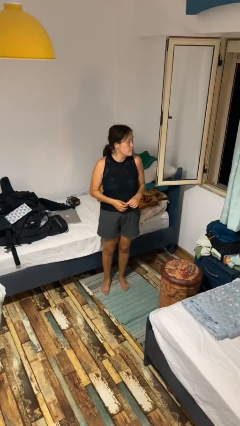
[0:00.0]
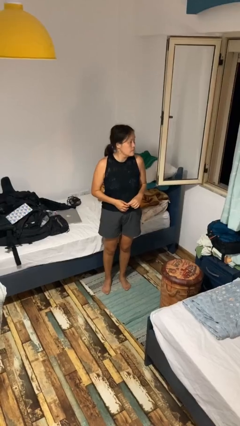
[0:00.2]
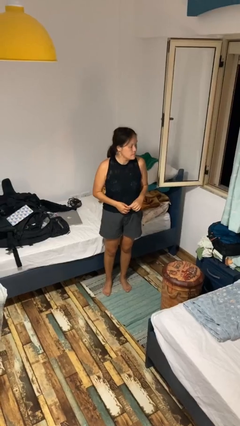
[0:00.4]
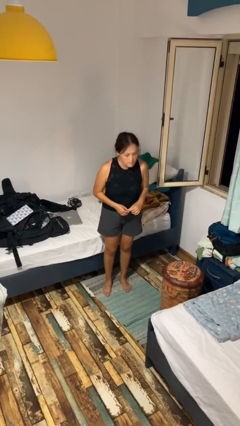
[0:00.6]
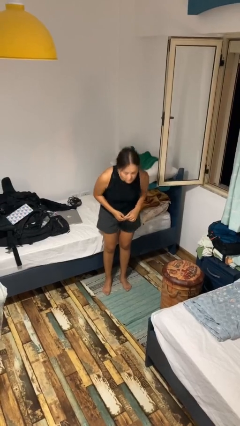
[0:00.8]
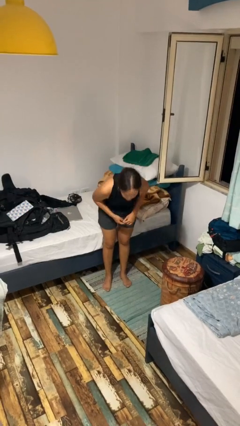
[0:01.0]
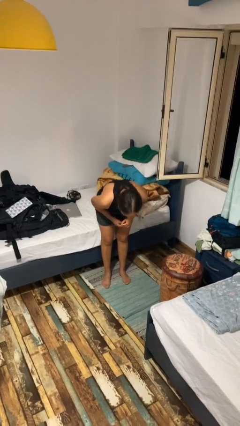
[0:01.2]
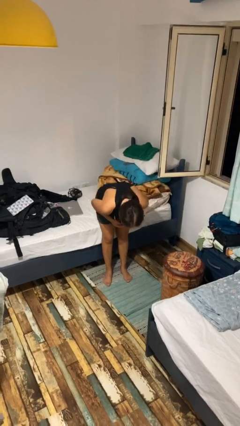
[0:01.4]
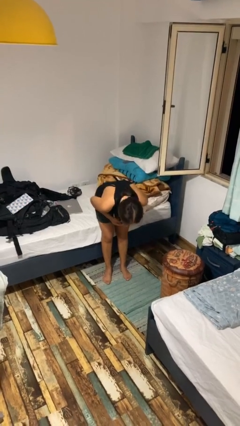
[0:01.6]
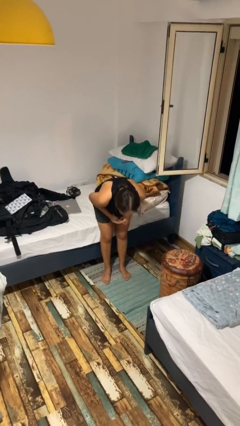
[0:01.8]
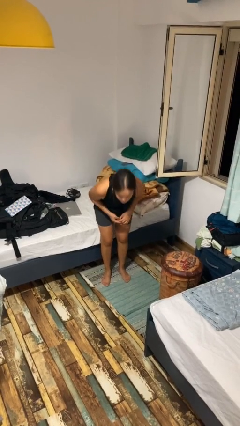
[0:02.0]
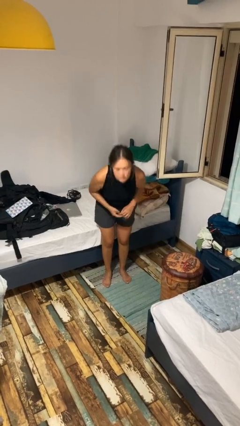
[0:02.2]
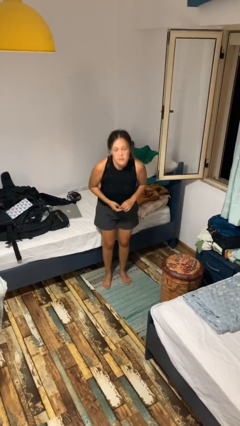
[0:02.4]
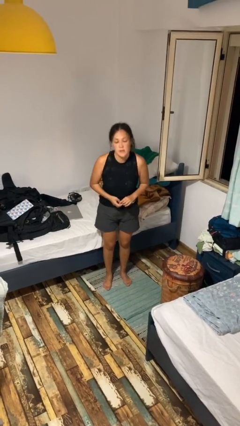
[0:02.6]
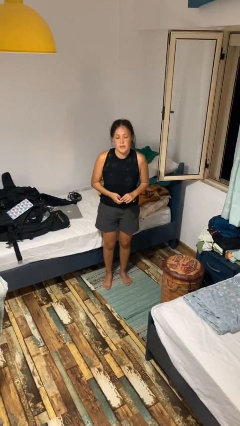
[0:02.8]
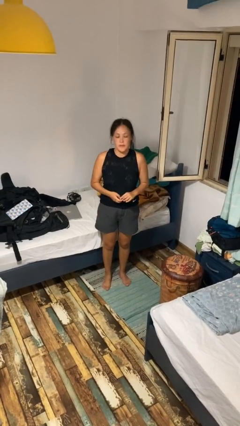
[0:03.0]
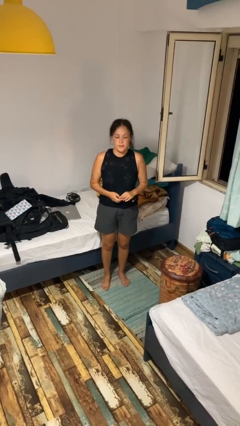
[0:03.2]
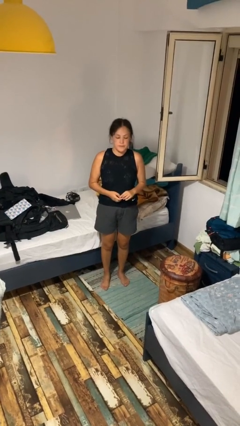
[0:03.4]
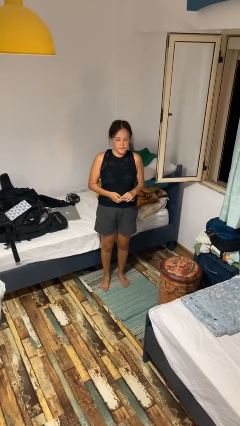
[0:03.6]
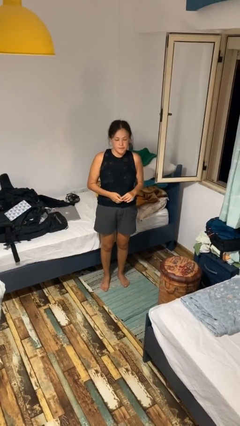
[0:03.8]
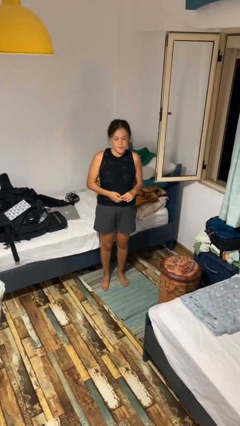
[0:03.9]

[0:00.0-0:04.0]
person bows

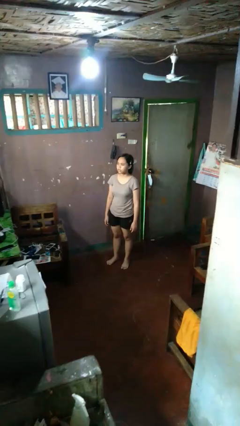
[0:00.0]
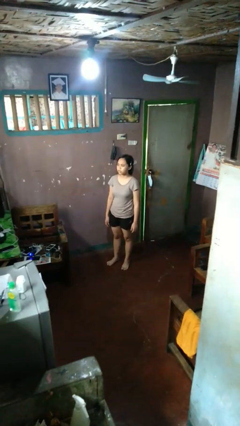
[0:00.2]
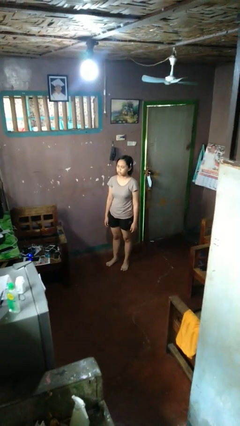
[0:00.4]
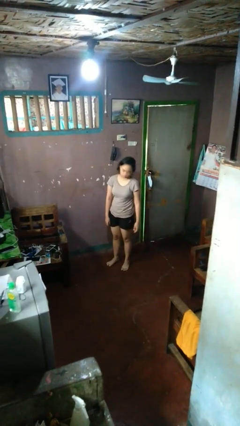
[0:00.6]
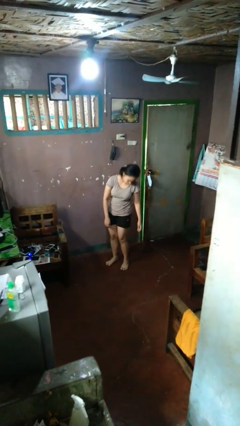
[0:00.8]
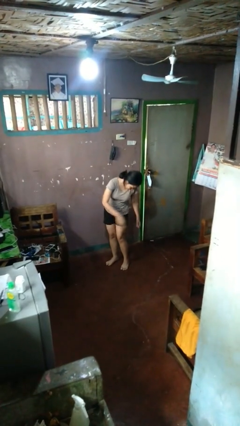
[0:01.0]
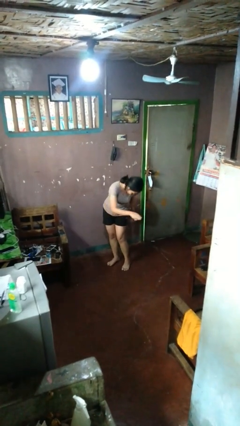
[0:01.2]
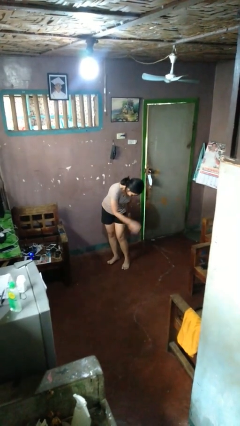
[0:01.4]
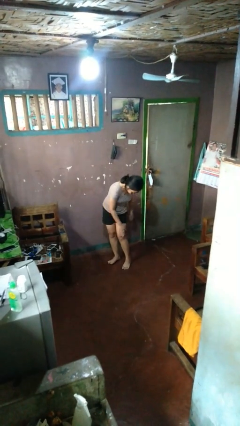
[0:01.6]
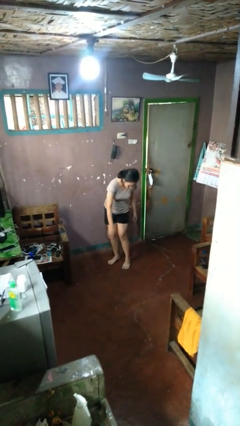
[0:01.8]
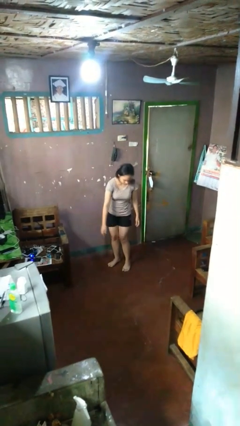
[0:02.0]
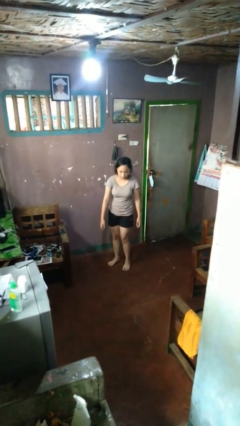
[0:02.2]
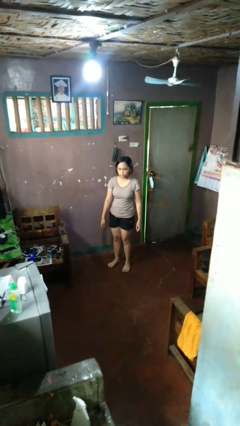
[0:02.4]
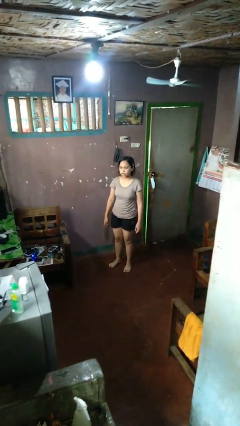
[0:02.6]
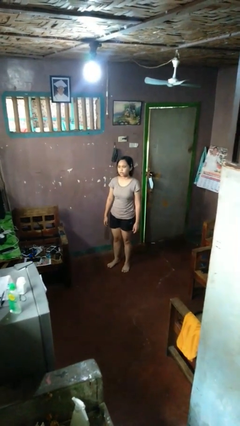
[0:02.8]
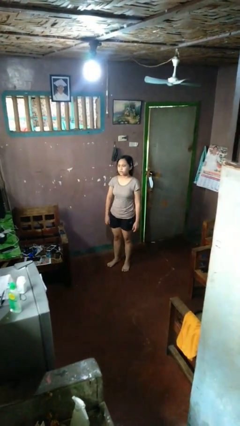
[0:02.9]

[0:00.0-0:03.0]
person swats bug

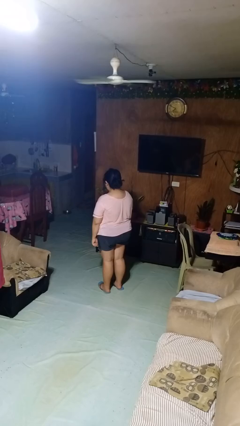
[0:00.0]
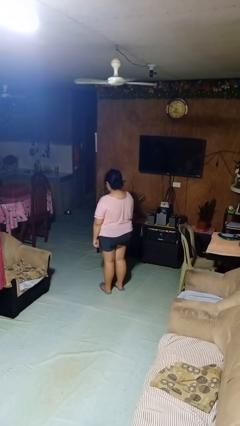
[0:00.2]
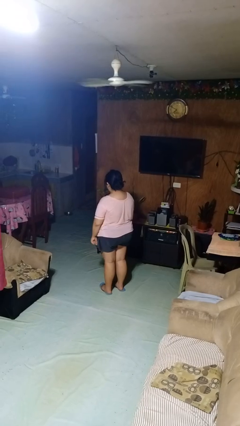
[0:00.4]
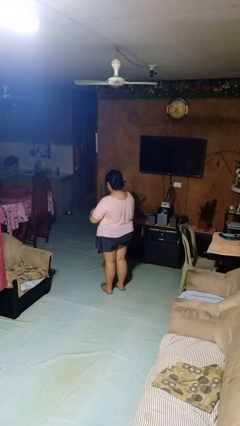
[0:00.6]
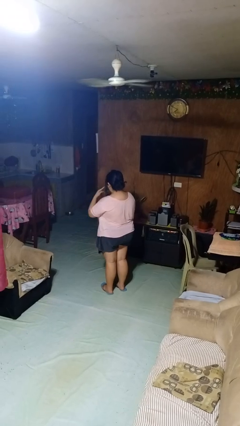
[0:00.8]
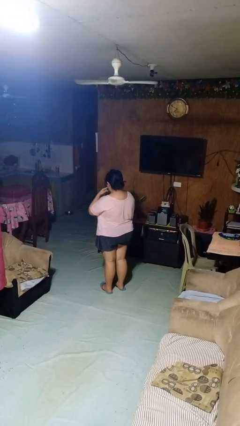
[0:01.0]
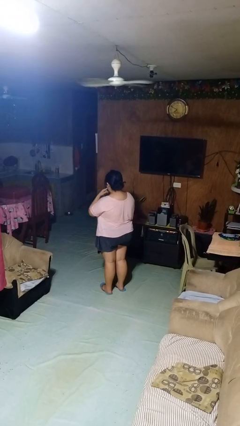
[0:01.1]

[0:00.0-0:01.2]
person licks fingers

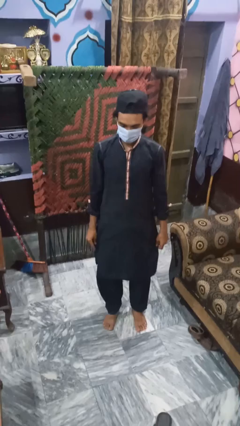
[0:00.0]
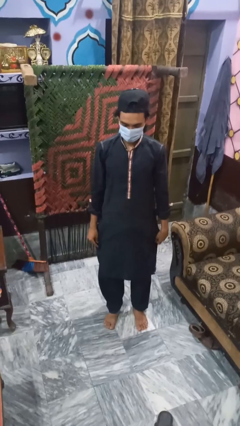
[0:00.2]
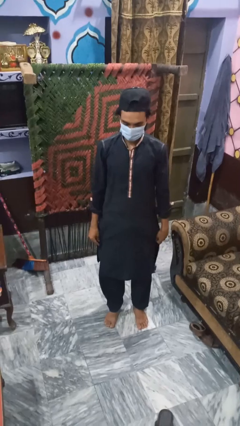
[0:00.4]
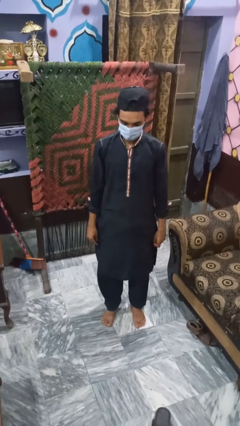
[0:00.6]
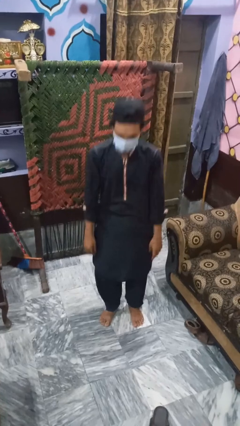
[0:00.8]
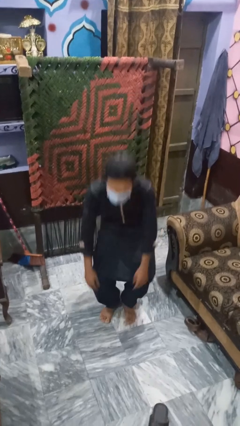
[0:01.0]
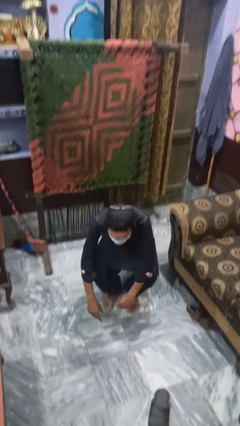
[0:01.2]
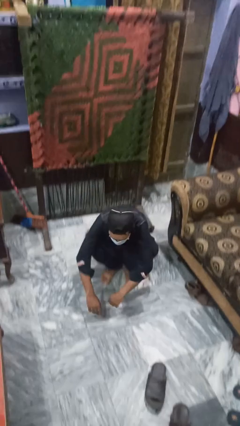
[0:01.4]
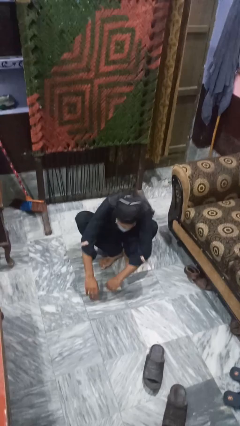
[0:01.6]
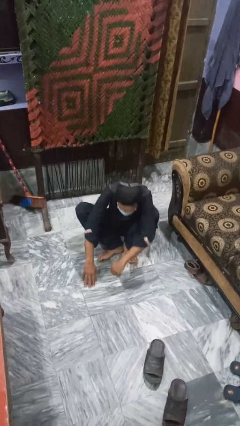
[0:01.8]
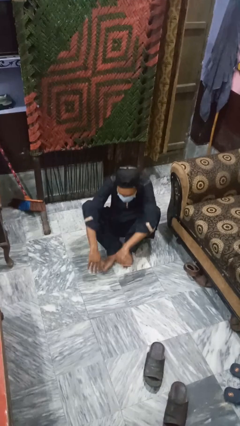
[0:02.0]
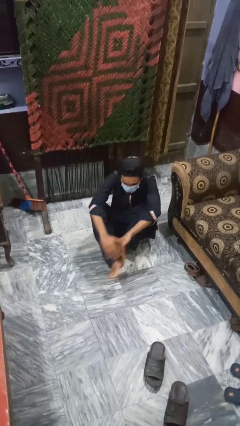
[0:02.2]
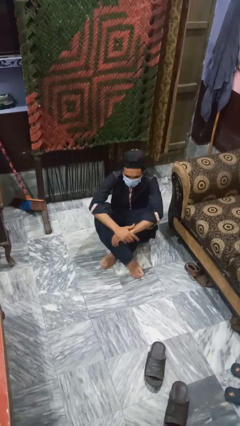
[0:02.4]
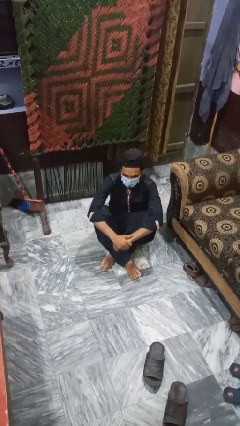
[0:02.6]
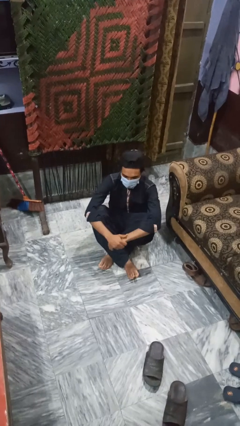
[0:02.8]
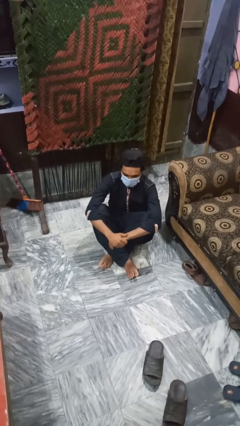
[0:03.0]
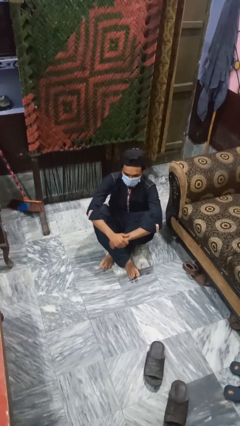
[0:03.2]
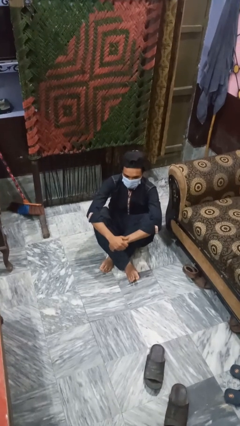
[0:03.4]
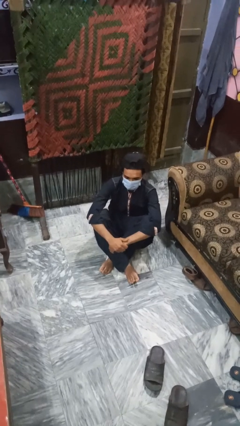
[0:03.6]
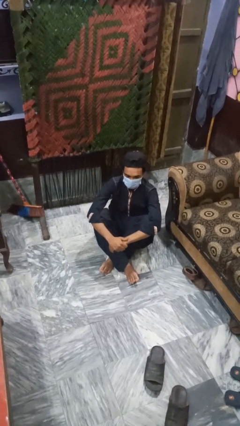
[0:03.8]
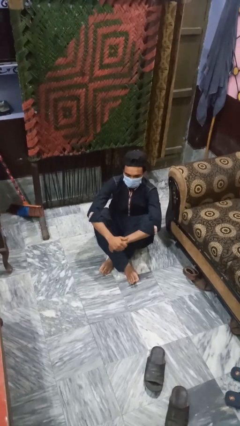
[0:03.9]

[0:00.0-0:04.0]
person sits crisscross

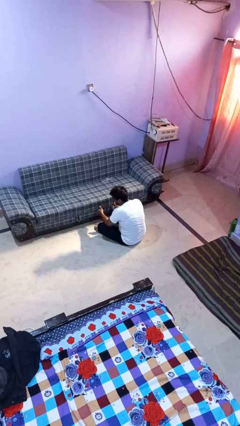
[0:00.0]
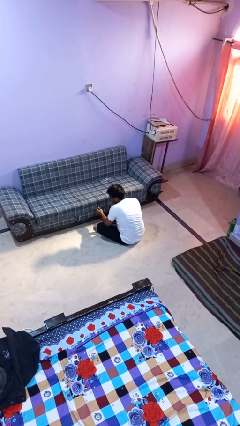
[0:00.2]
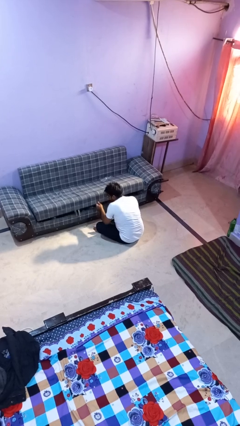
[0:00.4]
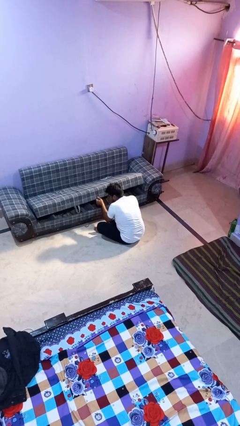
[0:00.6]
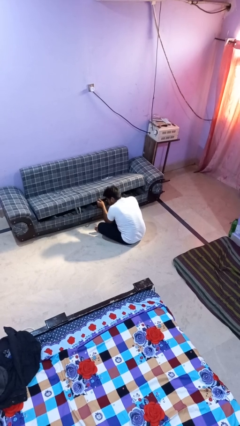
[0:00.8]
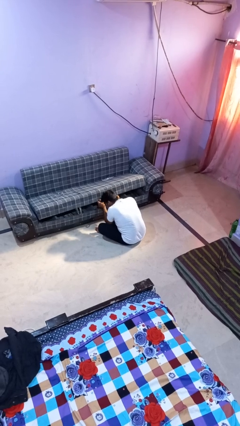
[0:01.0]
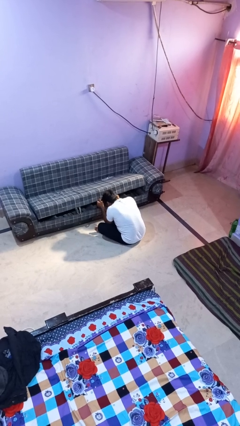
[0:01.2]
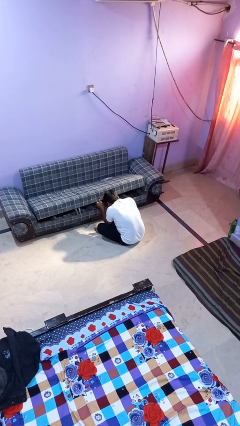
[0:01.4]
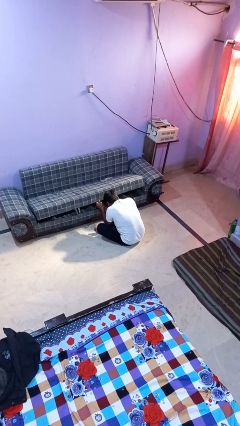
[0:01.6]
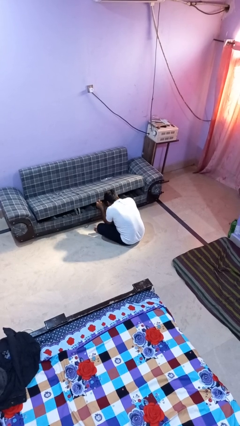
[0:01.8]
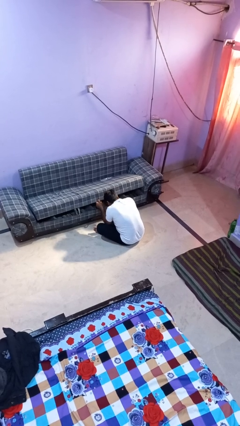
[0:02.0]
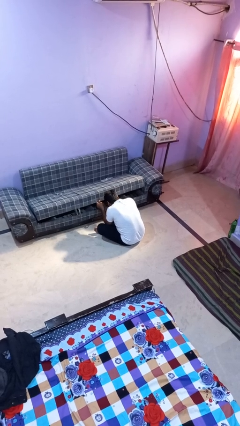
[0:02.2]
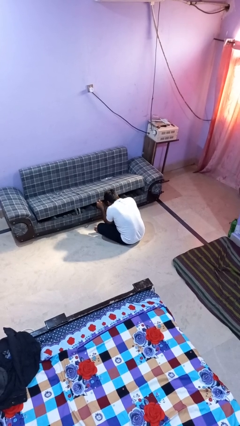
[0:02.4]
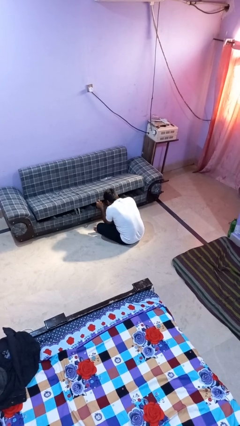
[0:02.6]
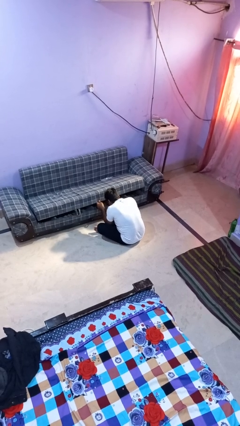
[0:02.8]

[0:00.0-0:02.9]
person searches under couch

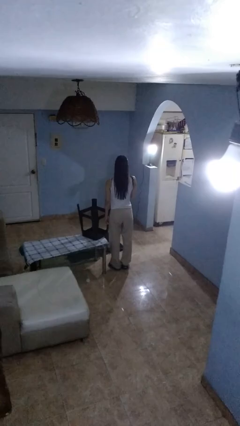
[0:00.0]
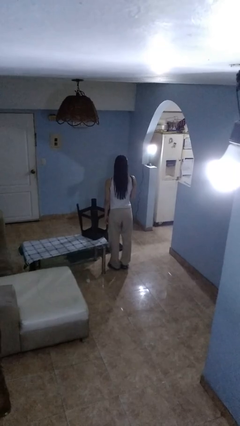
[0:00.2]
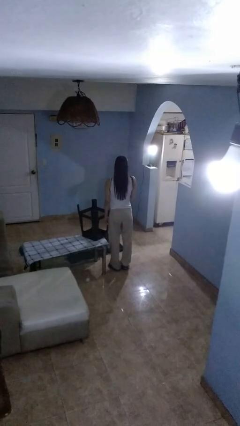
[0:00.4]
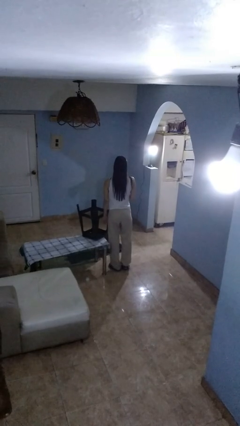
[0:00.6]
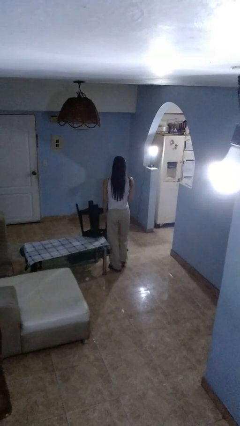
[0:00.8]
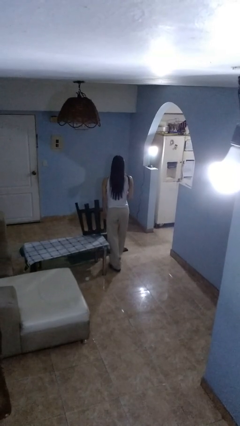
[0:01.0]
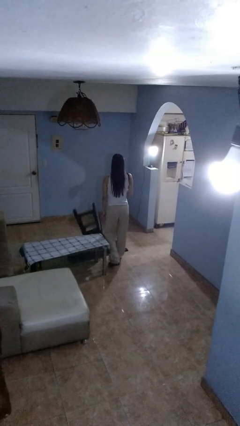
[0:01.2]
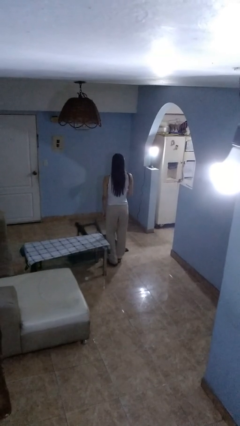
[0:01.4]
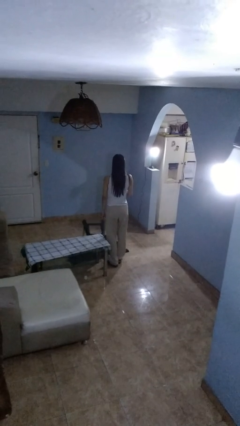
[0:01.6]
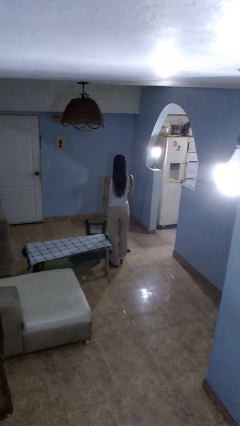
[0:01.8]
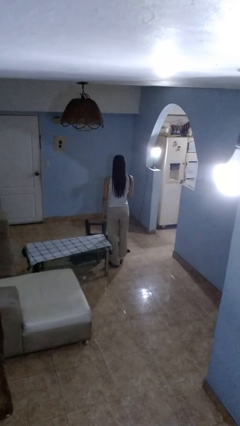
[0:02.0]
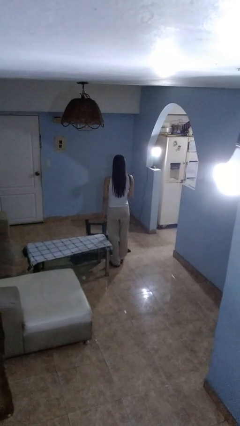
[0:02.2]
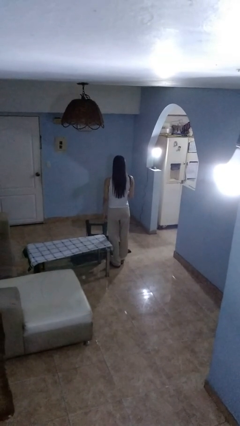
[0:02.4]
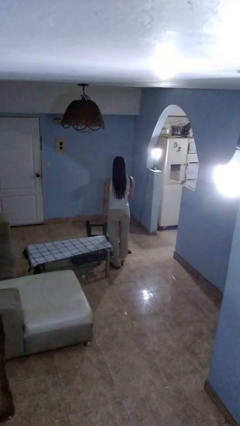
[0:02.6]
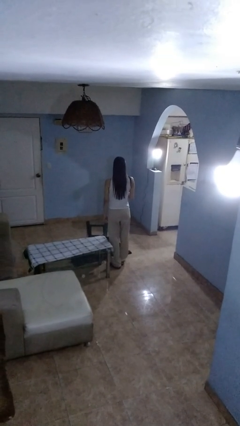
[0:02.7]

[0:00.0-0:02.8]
person knocks over furniture
